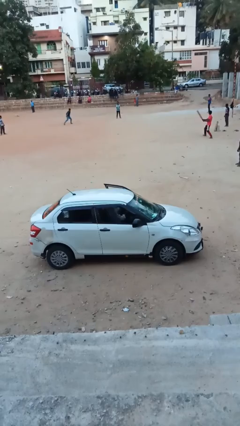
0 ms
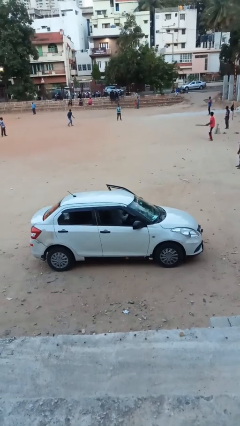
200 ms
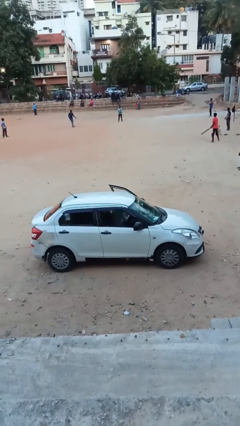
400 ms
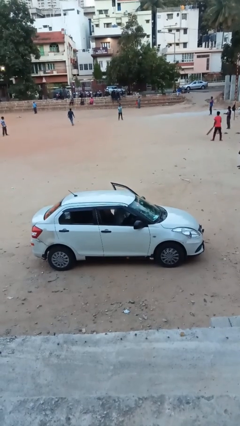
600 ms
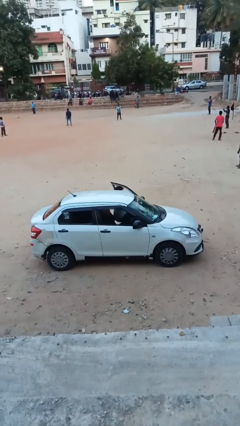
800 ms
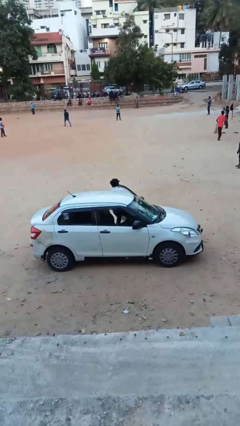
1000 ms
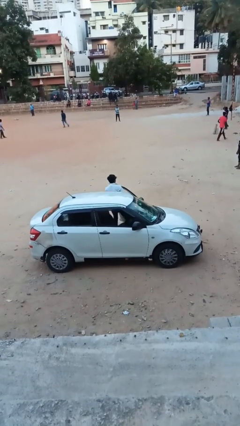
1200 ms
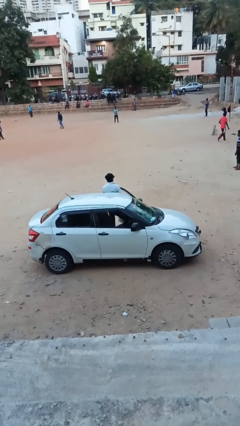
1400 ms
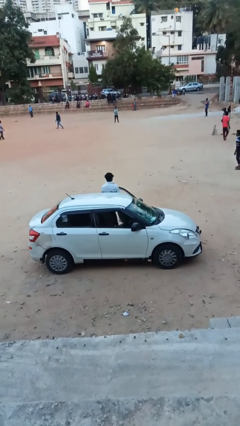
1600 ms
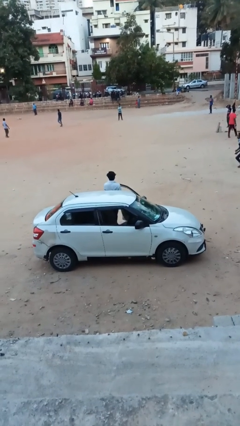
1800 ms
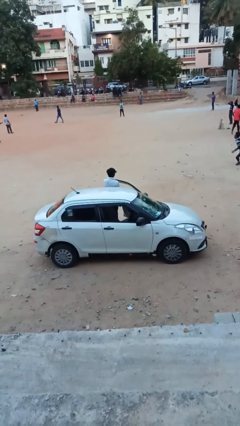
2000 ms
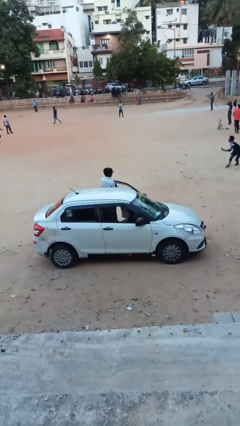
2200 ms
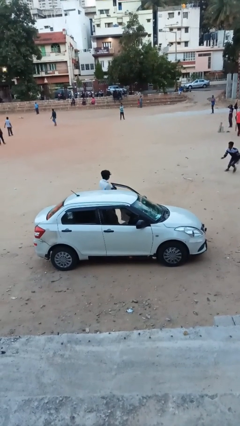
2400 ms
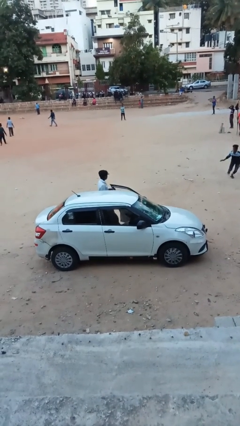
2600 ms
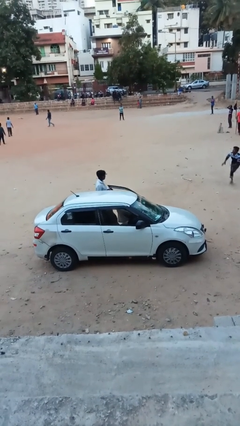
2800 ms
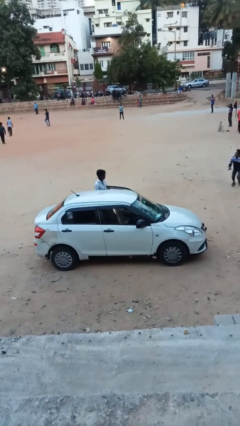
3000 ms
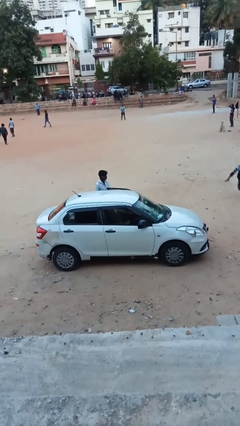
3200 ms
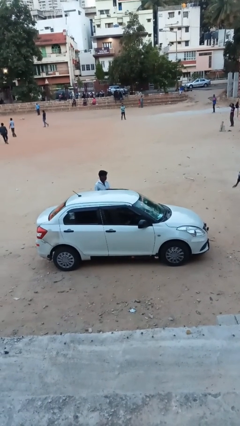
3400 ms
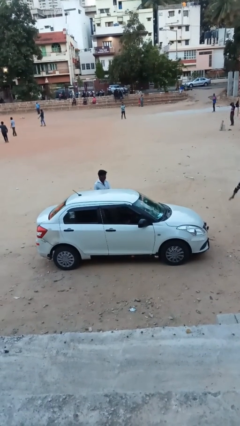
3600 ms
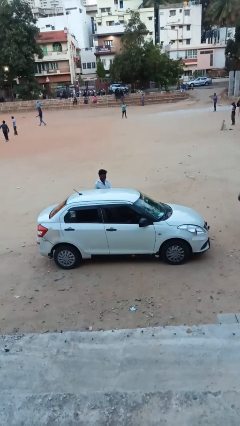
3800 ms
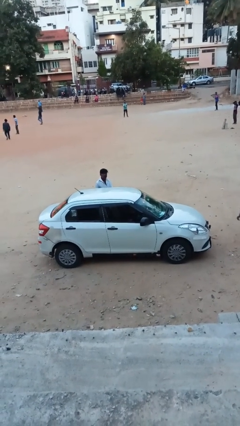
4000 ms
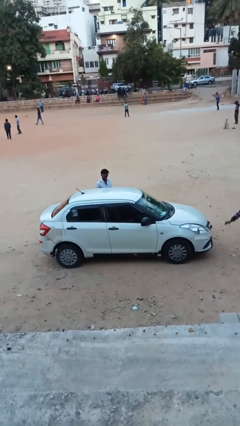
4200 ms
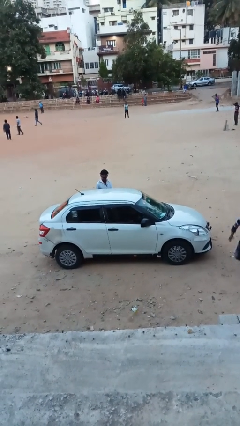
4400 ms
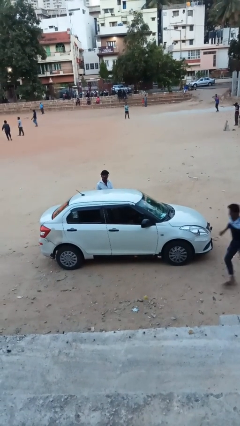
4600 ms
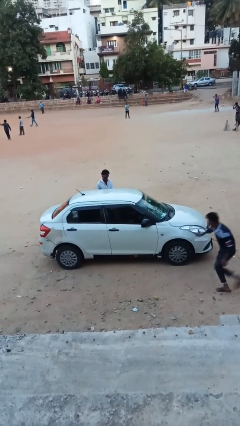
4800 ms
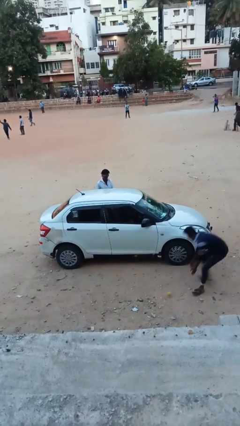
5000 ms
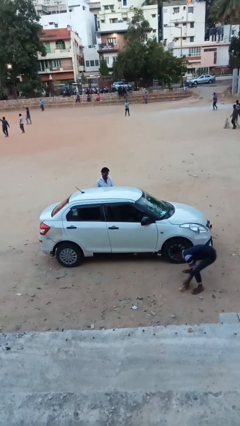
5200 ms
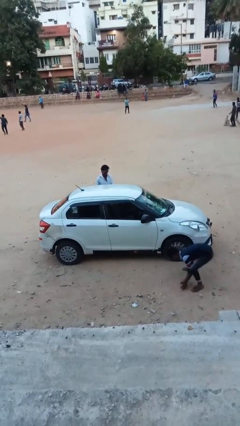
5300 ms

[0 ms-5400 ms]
car drops off person

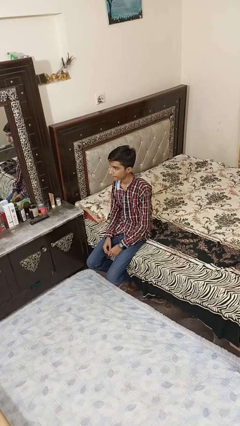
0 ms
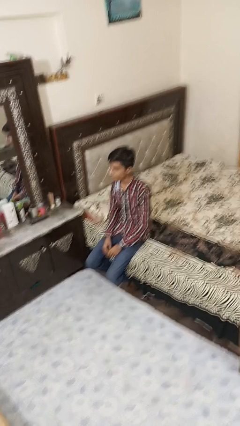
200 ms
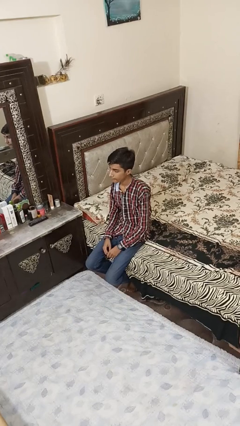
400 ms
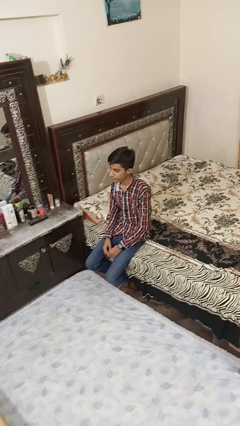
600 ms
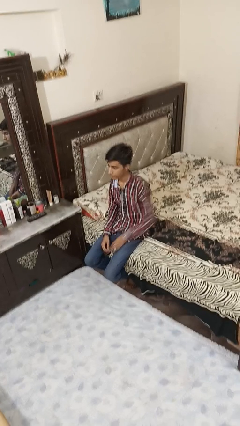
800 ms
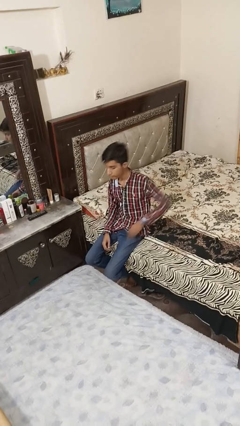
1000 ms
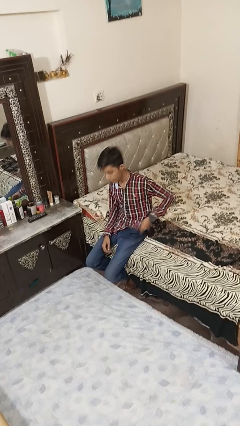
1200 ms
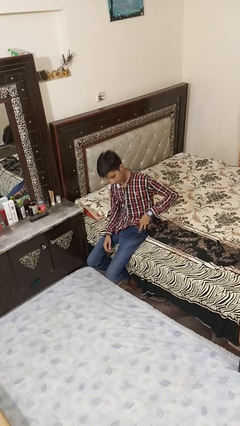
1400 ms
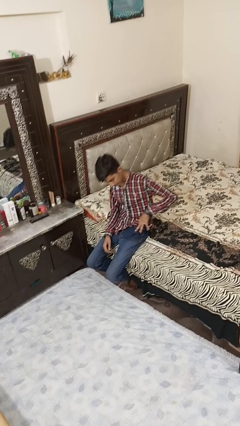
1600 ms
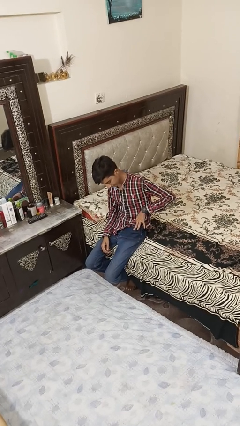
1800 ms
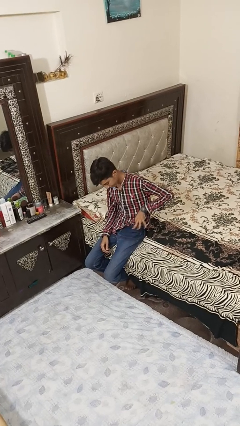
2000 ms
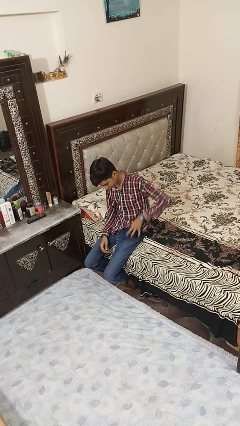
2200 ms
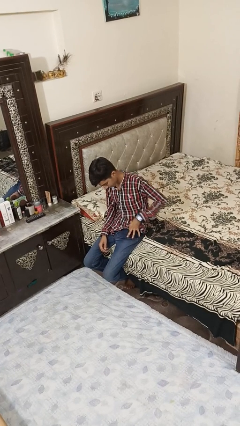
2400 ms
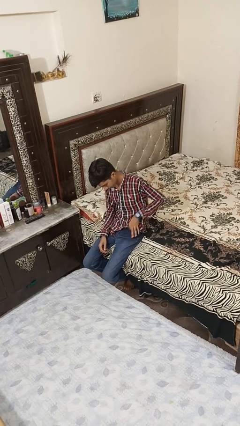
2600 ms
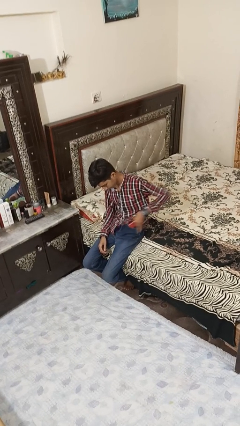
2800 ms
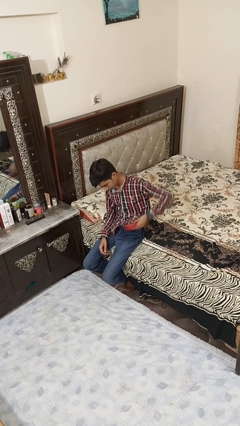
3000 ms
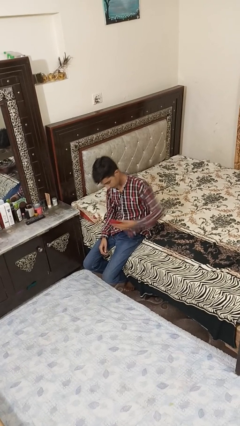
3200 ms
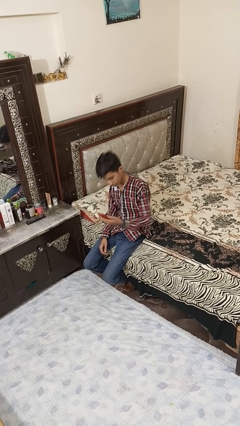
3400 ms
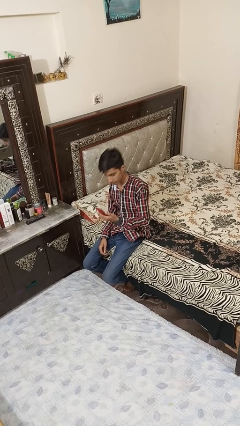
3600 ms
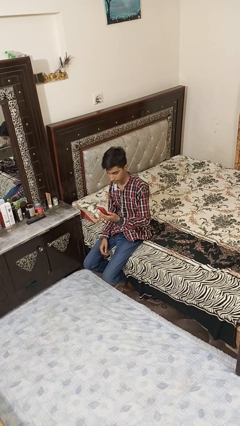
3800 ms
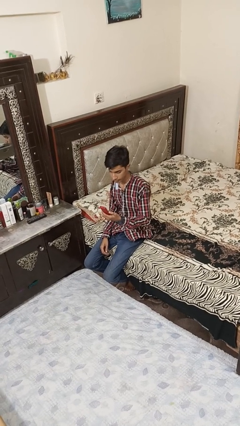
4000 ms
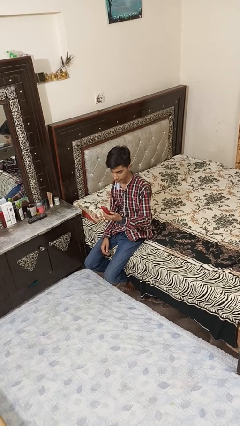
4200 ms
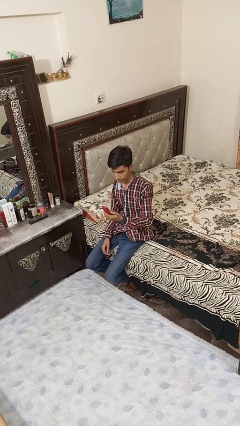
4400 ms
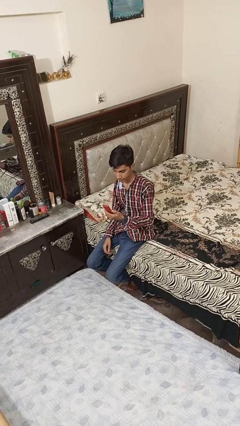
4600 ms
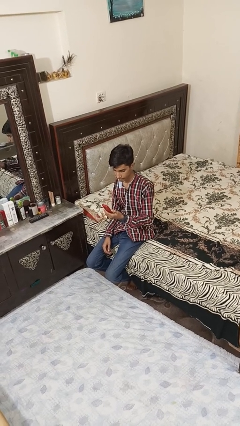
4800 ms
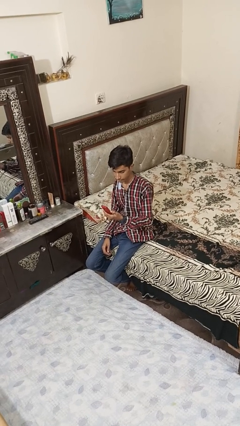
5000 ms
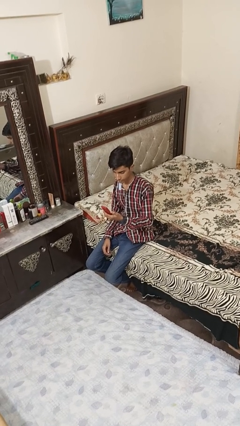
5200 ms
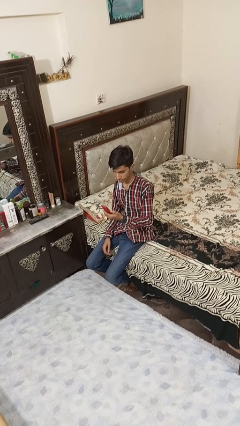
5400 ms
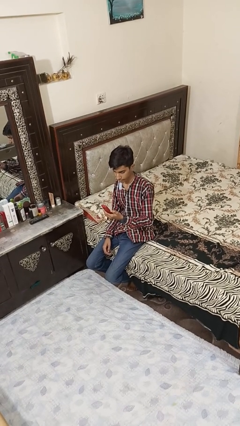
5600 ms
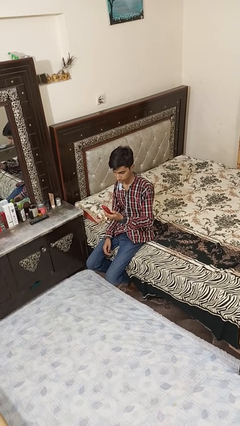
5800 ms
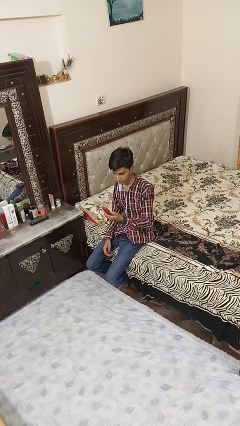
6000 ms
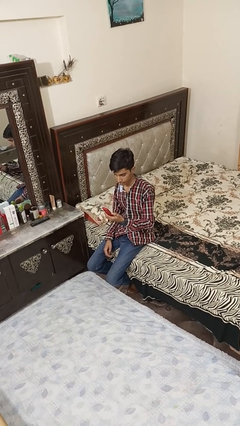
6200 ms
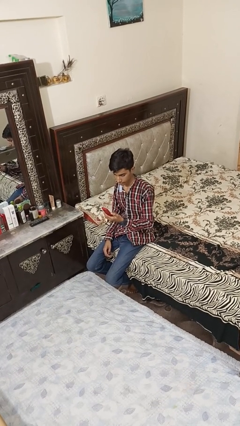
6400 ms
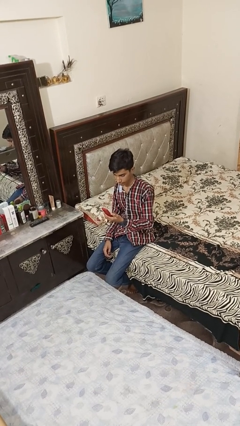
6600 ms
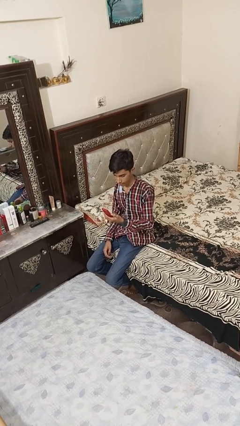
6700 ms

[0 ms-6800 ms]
person takes phone from pocket

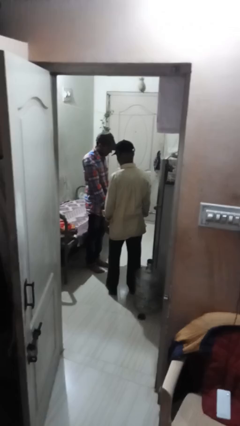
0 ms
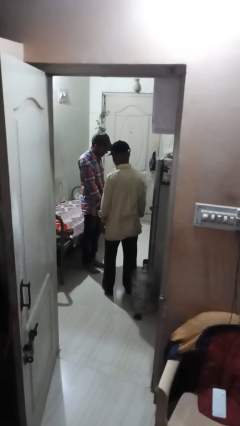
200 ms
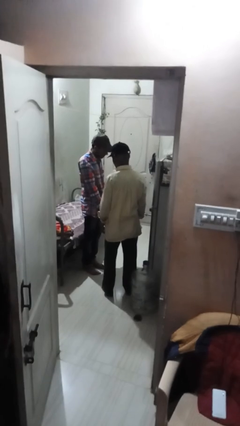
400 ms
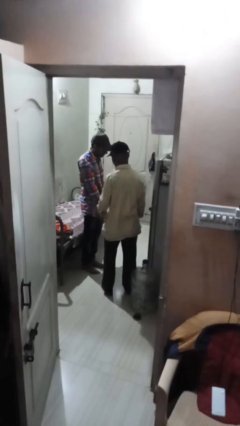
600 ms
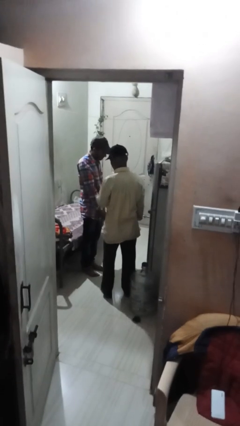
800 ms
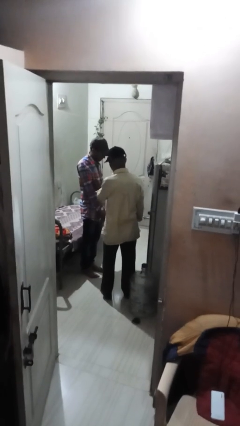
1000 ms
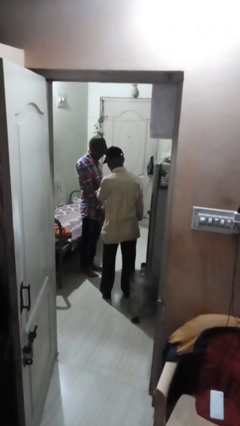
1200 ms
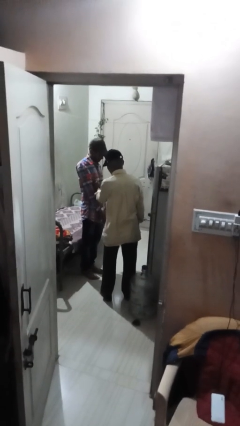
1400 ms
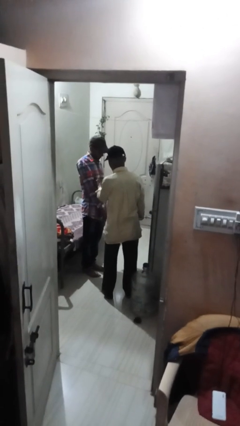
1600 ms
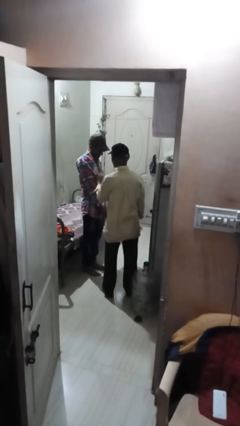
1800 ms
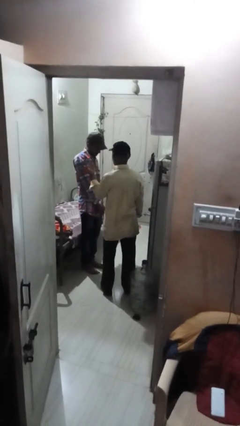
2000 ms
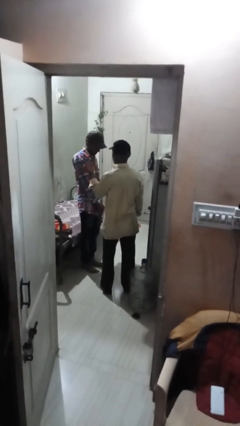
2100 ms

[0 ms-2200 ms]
person tickles person

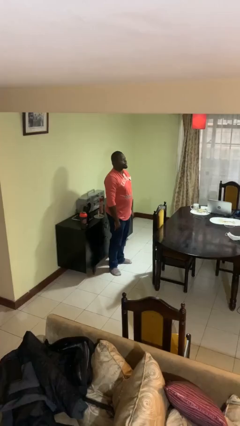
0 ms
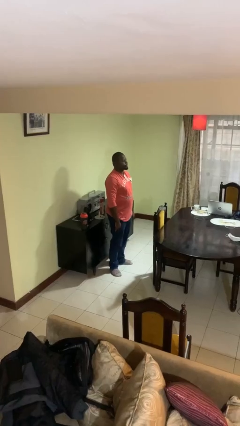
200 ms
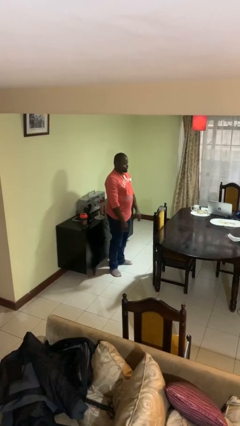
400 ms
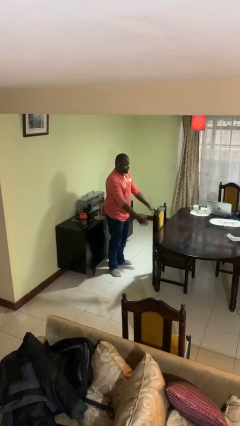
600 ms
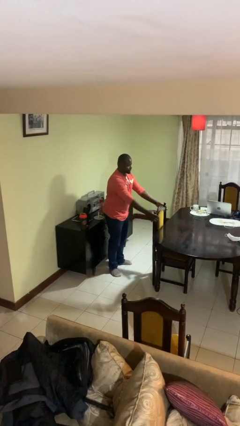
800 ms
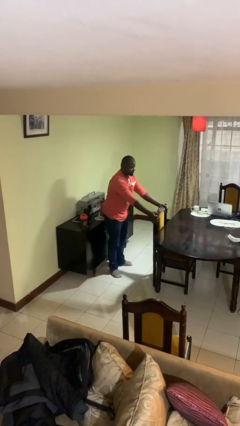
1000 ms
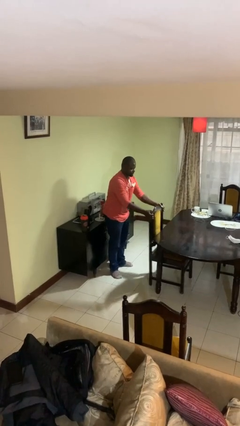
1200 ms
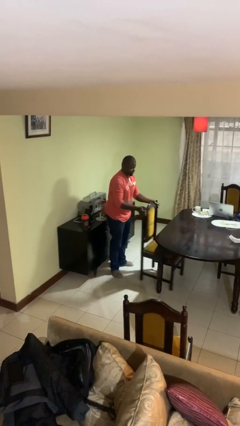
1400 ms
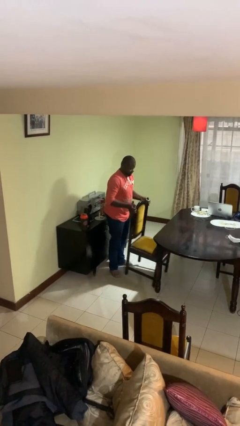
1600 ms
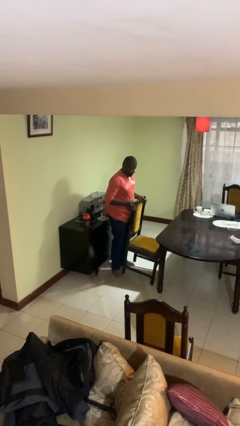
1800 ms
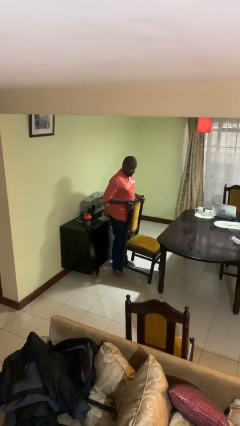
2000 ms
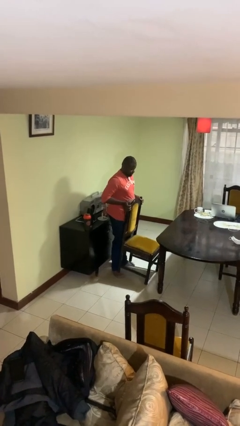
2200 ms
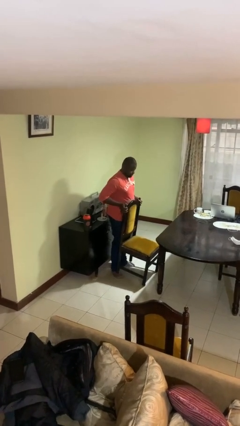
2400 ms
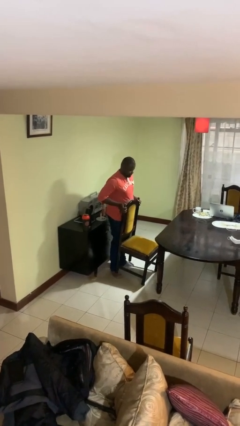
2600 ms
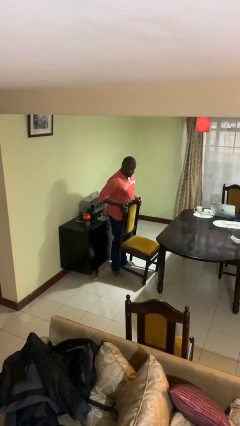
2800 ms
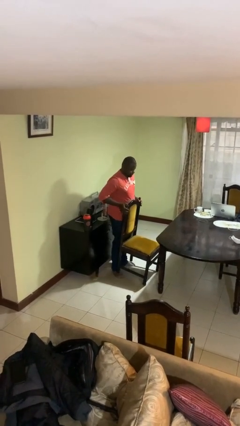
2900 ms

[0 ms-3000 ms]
person pulls out chair

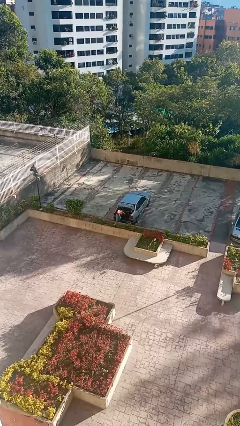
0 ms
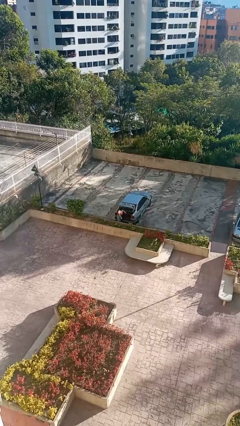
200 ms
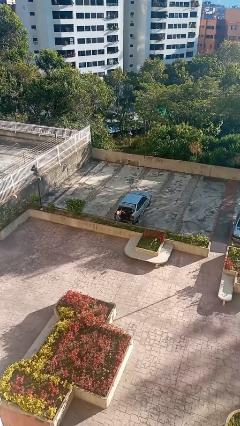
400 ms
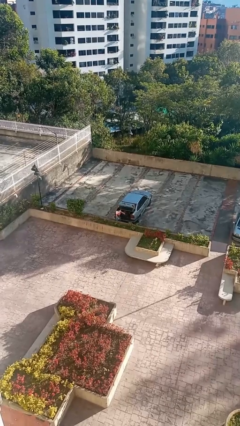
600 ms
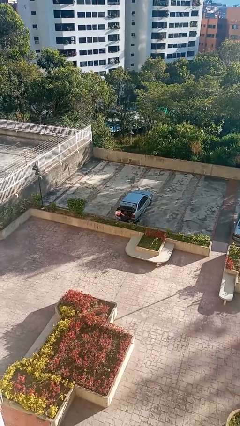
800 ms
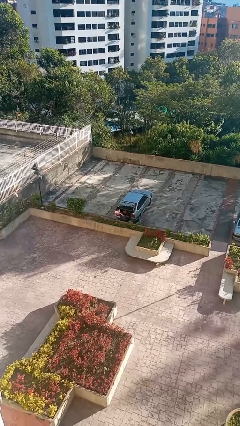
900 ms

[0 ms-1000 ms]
person unloads car
